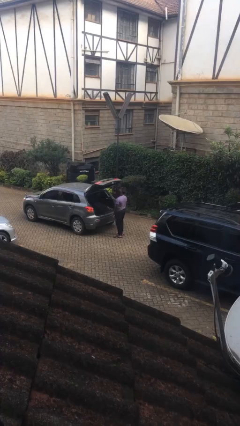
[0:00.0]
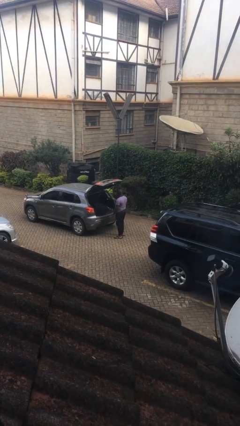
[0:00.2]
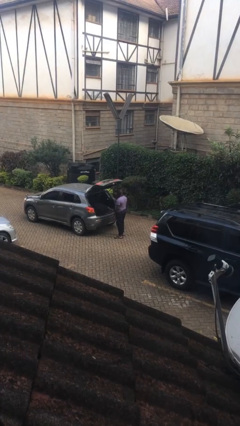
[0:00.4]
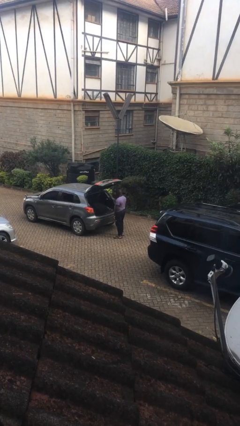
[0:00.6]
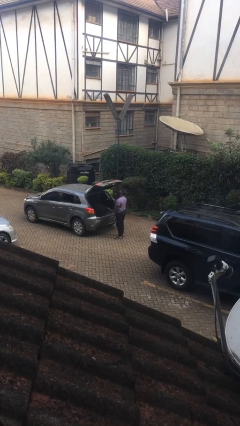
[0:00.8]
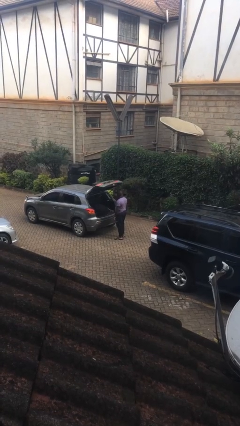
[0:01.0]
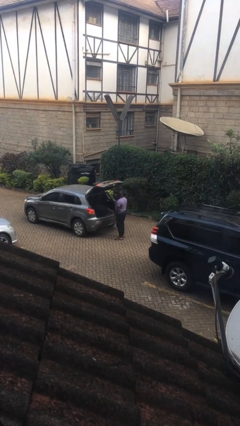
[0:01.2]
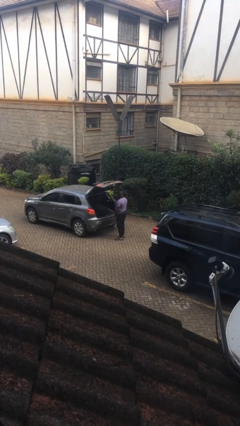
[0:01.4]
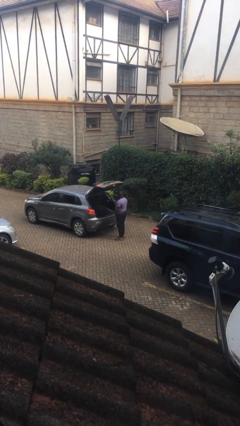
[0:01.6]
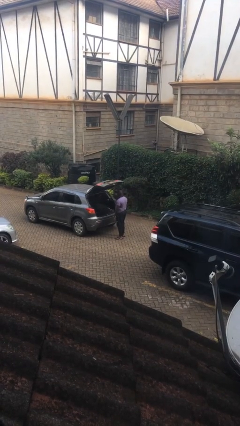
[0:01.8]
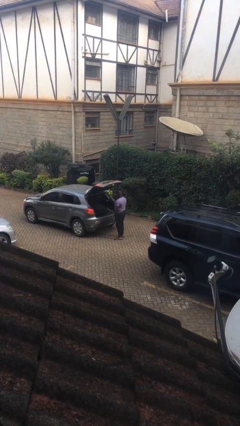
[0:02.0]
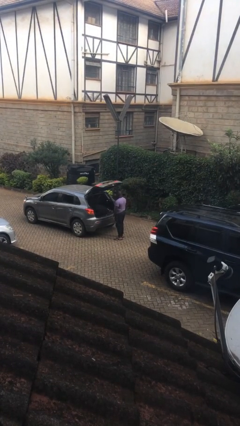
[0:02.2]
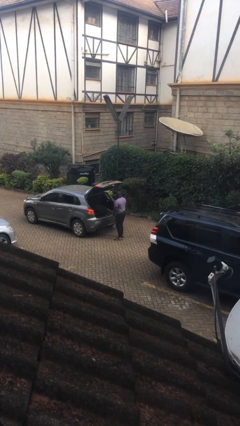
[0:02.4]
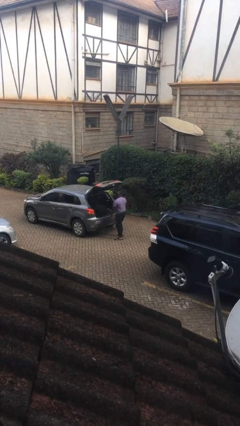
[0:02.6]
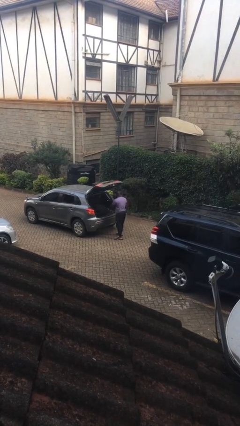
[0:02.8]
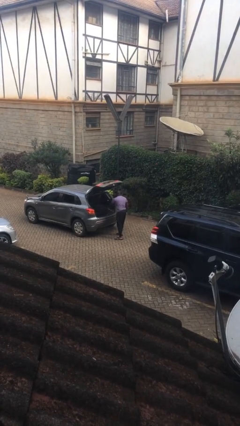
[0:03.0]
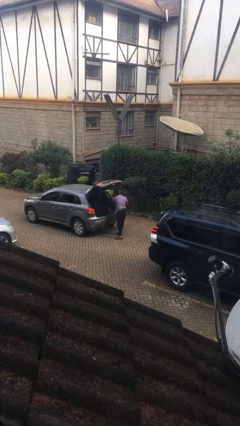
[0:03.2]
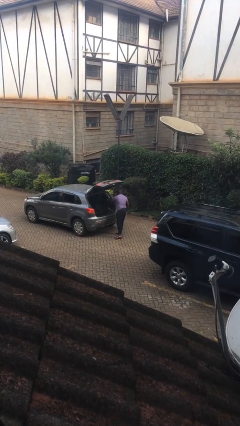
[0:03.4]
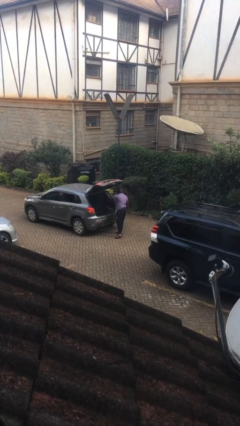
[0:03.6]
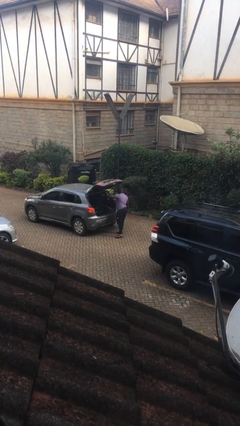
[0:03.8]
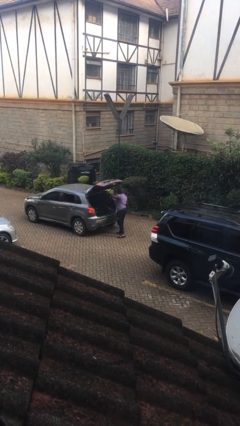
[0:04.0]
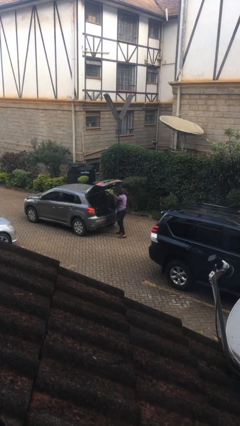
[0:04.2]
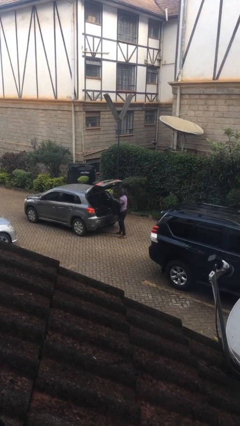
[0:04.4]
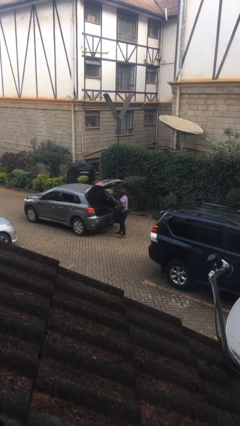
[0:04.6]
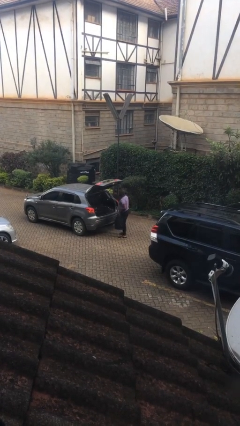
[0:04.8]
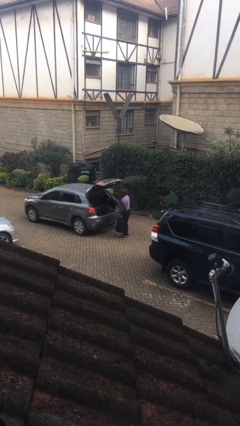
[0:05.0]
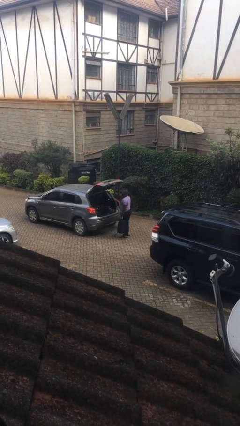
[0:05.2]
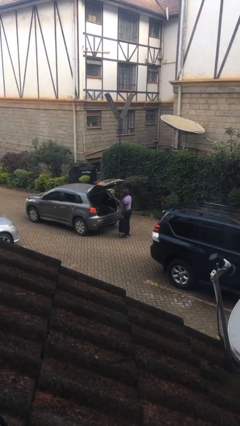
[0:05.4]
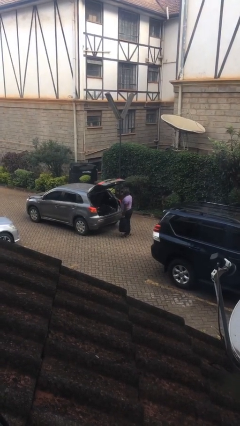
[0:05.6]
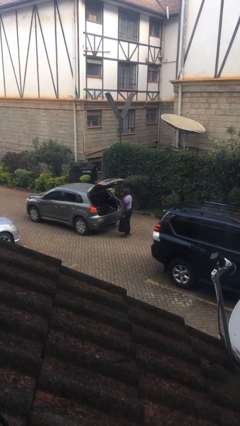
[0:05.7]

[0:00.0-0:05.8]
person unloads car

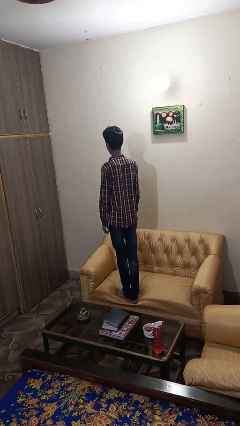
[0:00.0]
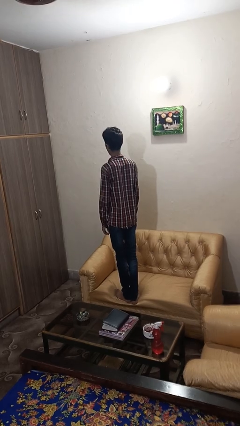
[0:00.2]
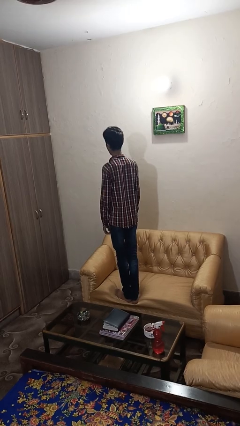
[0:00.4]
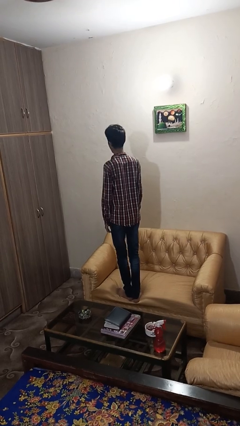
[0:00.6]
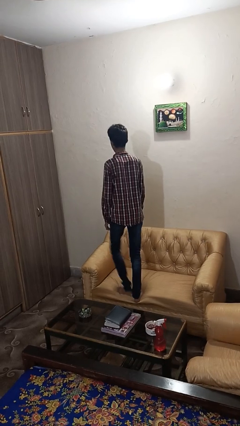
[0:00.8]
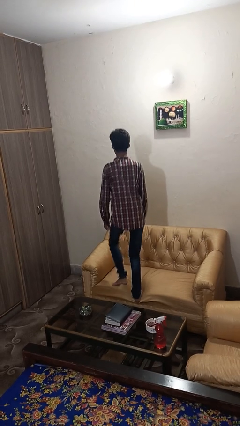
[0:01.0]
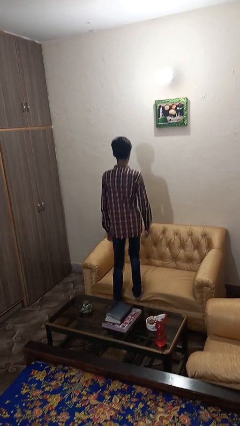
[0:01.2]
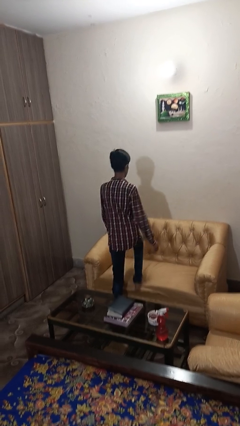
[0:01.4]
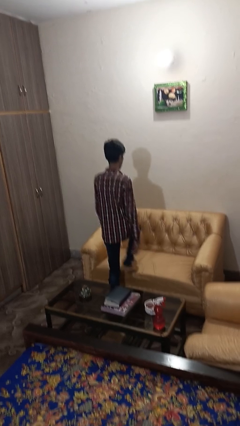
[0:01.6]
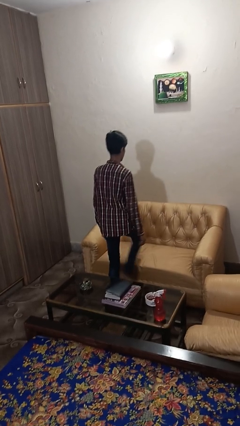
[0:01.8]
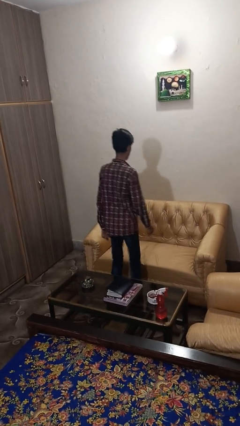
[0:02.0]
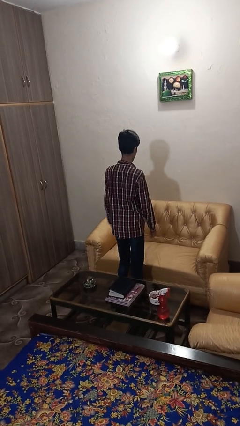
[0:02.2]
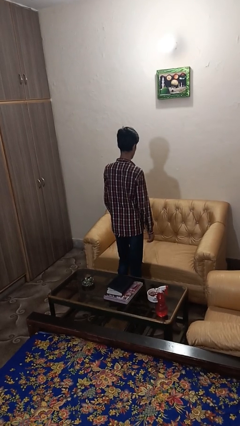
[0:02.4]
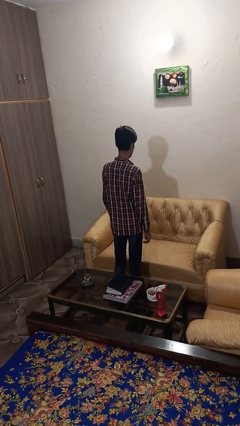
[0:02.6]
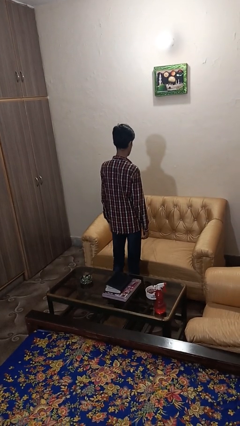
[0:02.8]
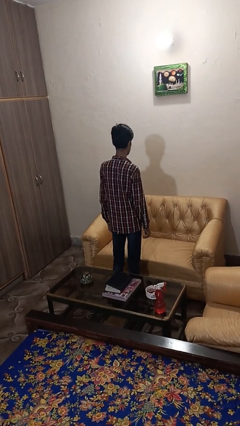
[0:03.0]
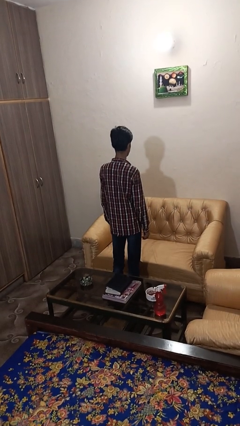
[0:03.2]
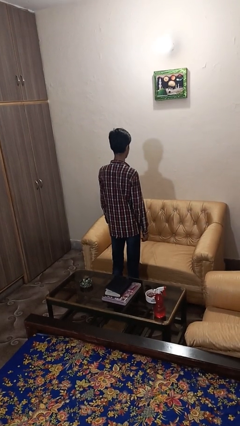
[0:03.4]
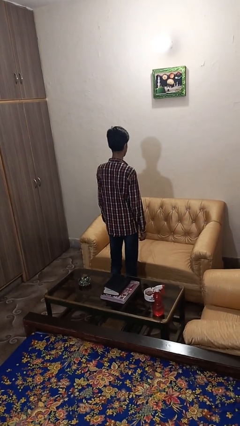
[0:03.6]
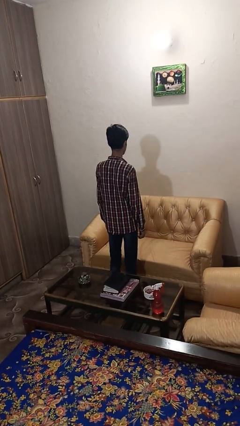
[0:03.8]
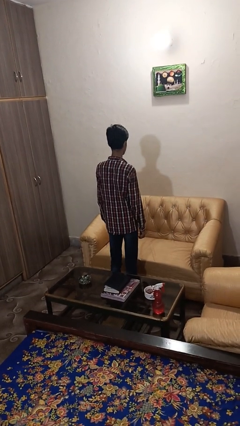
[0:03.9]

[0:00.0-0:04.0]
person climbs off couch

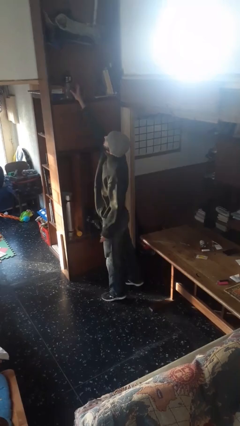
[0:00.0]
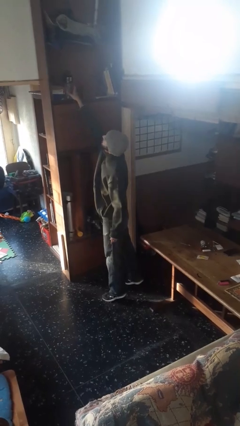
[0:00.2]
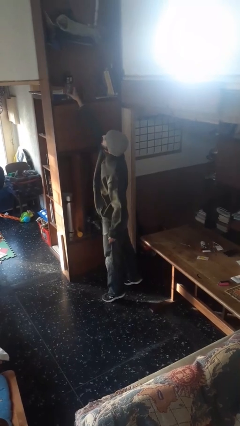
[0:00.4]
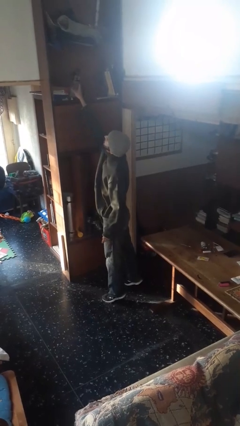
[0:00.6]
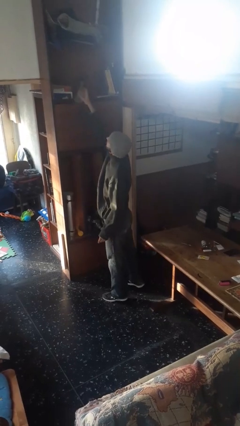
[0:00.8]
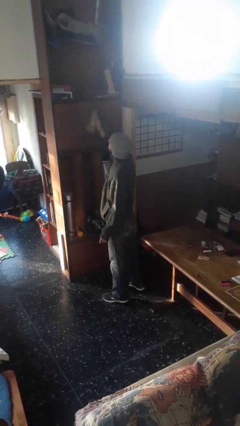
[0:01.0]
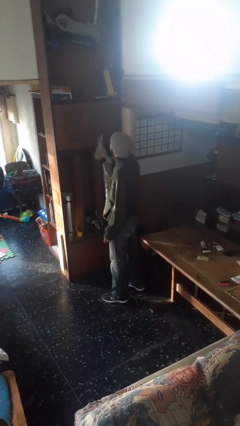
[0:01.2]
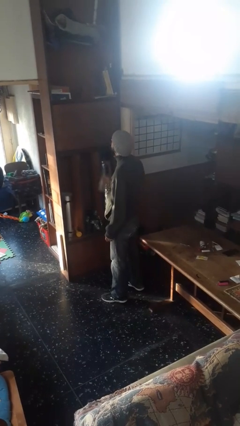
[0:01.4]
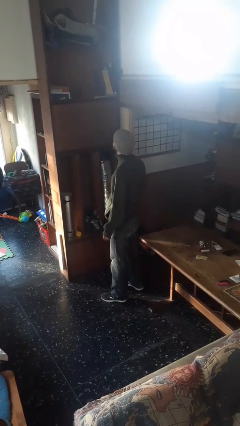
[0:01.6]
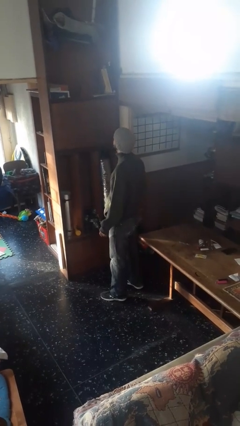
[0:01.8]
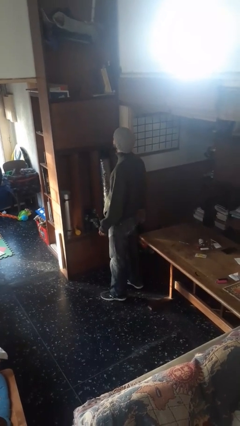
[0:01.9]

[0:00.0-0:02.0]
person puts down object on shelf

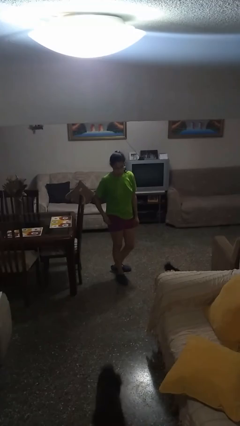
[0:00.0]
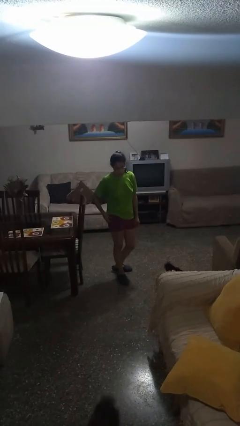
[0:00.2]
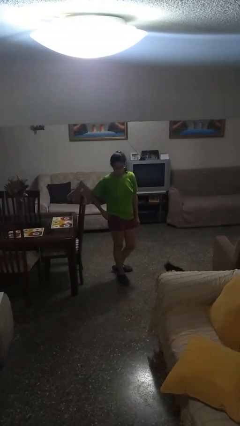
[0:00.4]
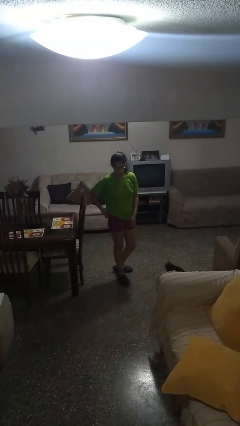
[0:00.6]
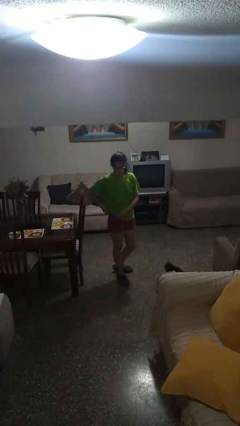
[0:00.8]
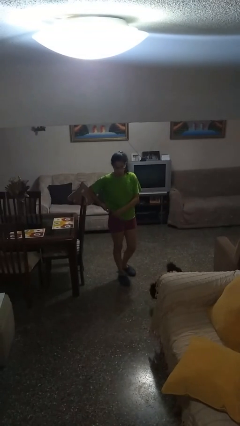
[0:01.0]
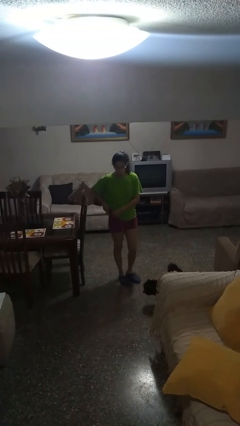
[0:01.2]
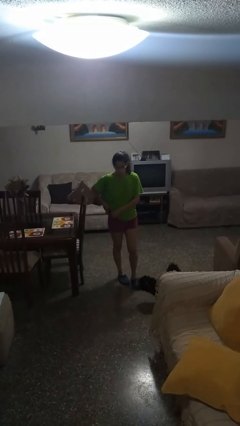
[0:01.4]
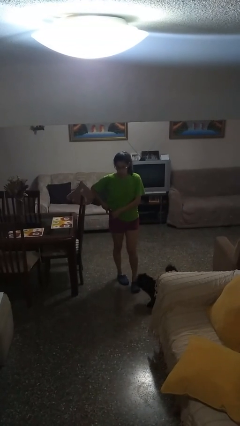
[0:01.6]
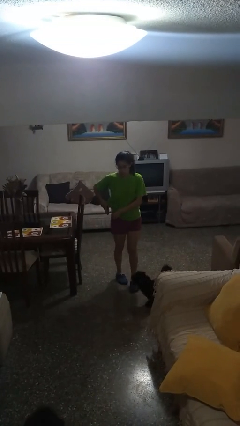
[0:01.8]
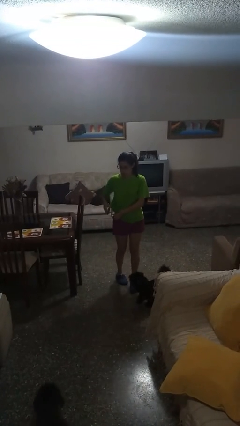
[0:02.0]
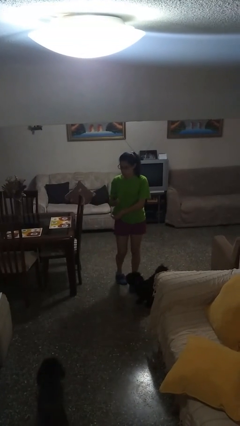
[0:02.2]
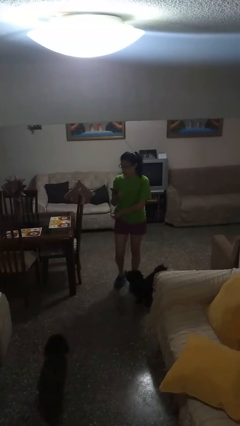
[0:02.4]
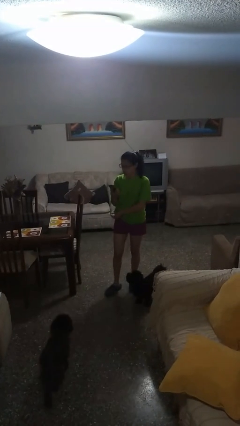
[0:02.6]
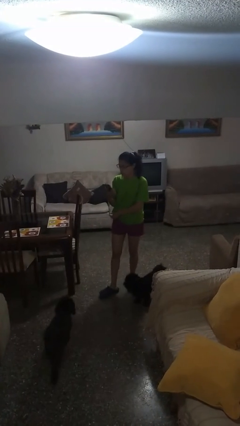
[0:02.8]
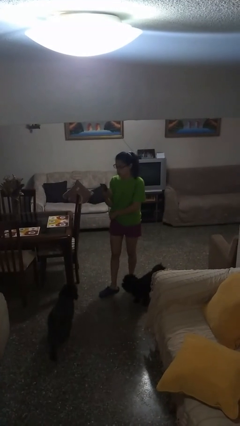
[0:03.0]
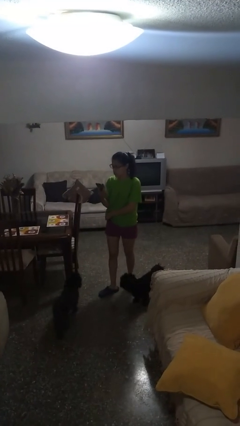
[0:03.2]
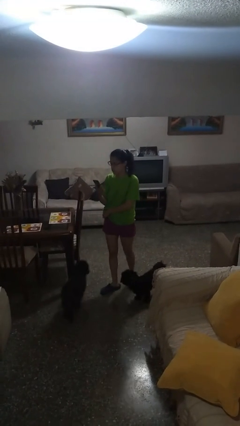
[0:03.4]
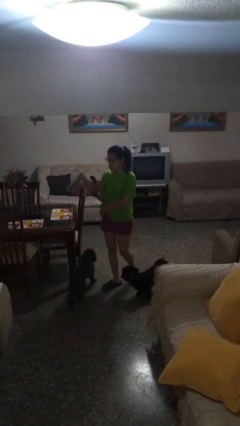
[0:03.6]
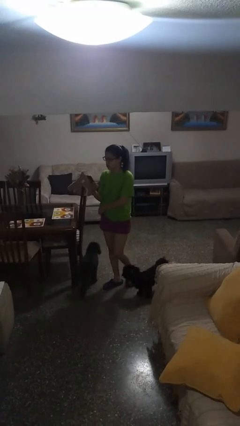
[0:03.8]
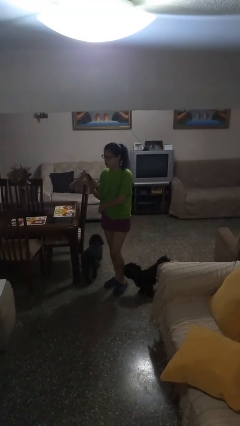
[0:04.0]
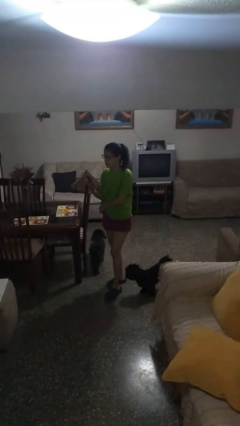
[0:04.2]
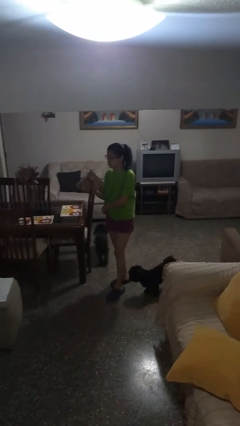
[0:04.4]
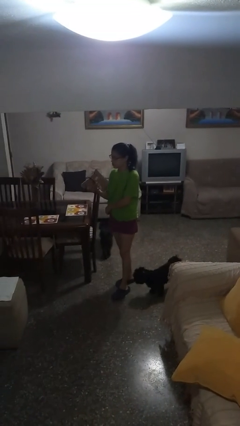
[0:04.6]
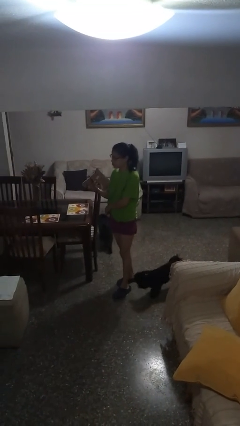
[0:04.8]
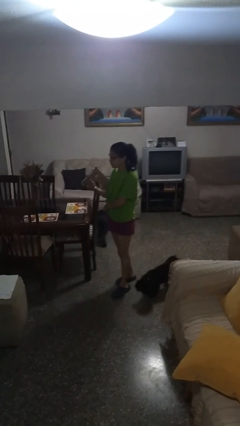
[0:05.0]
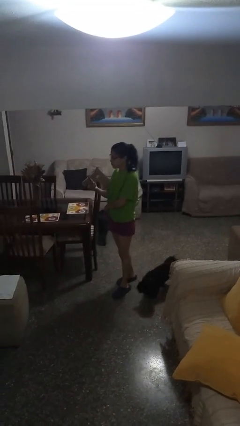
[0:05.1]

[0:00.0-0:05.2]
person takes phone from pocket

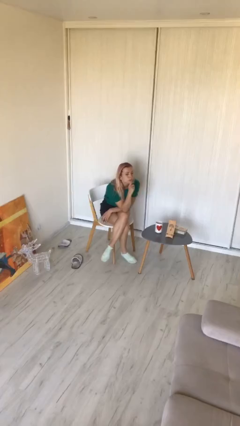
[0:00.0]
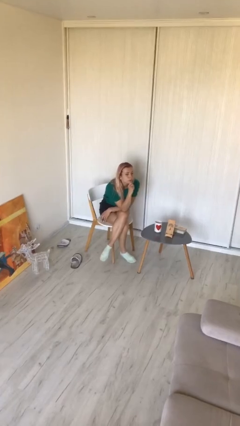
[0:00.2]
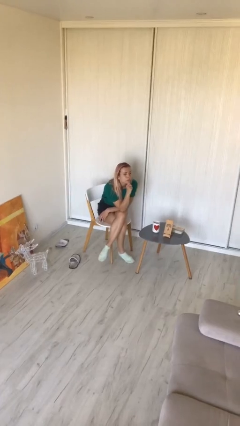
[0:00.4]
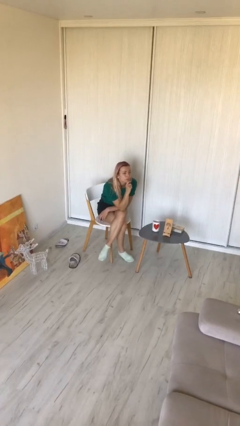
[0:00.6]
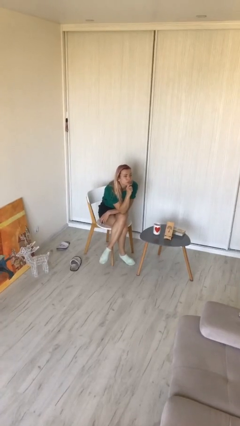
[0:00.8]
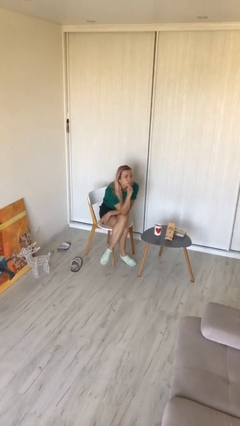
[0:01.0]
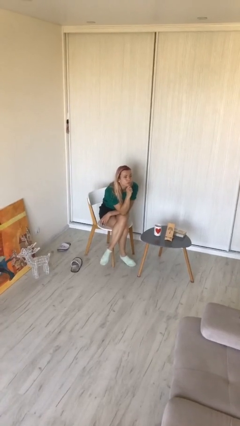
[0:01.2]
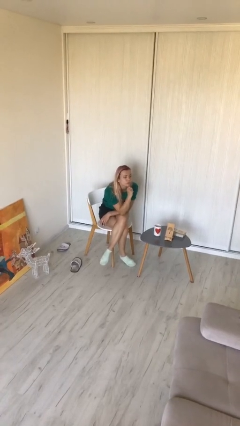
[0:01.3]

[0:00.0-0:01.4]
person strokes chin
